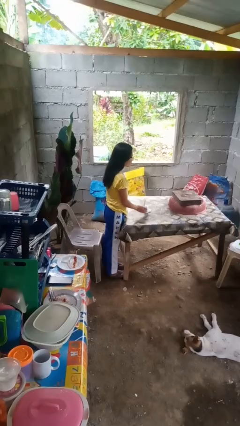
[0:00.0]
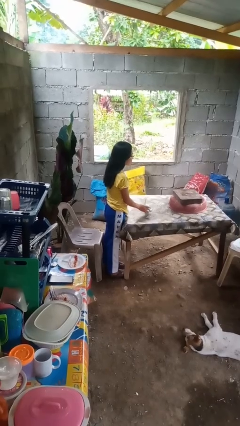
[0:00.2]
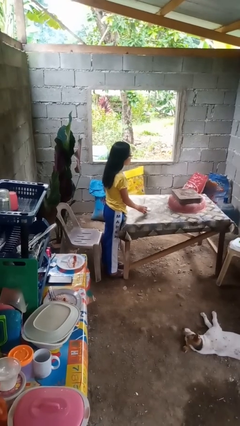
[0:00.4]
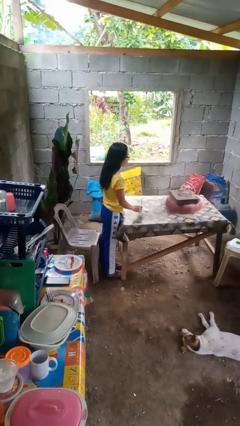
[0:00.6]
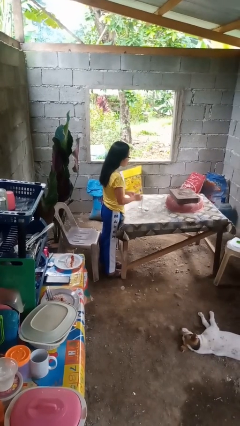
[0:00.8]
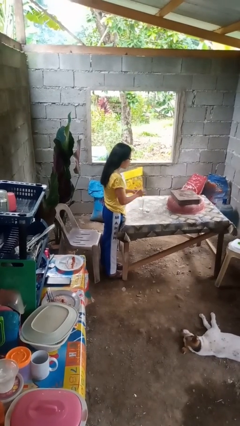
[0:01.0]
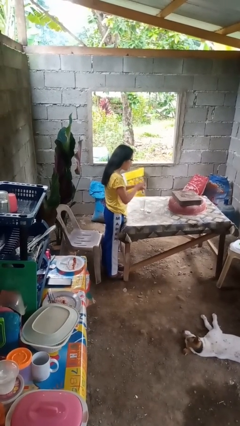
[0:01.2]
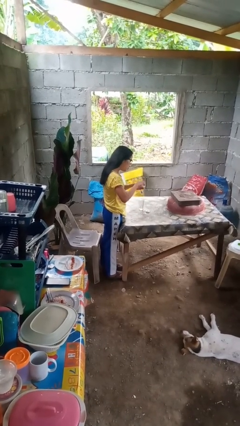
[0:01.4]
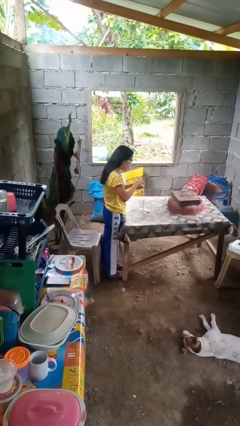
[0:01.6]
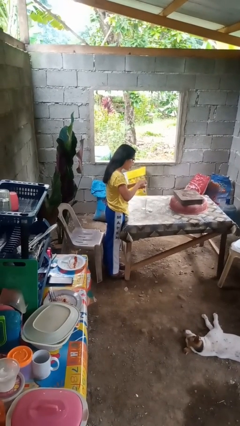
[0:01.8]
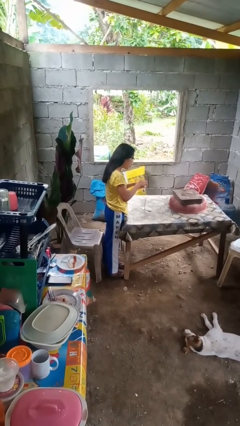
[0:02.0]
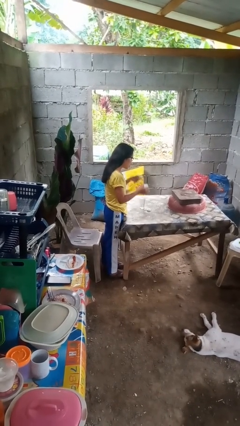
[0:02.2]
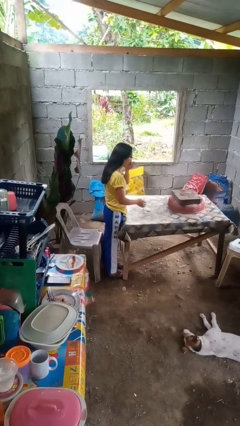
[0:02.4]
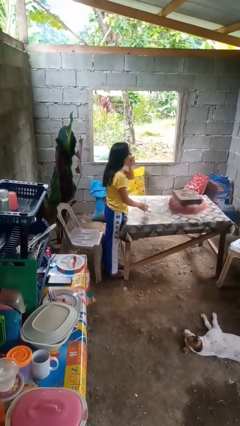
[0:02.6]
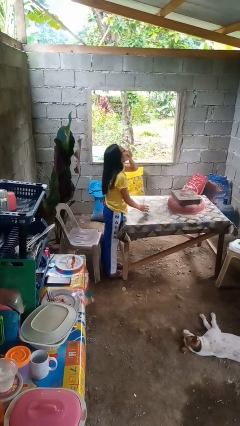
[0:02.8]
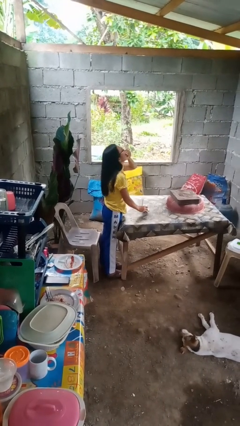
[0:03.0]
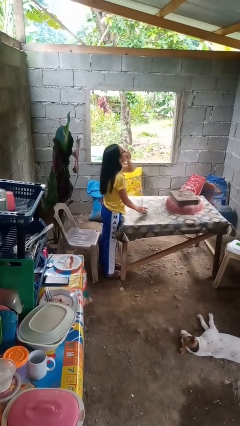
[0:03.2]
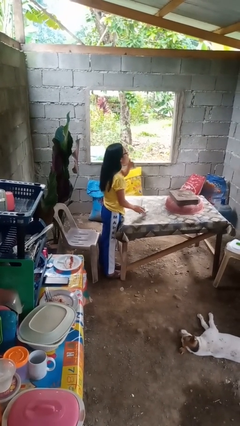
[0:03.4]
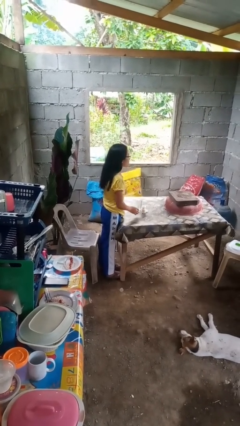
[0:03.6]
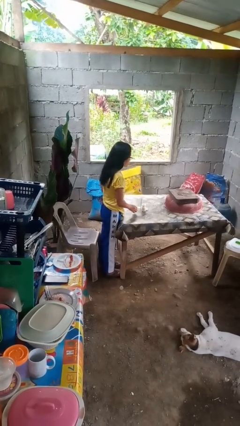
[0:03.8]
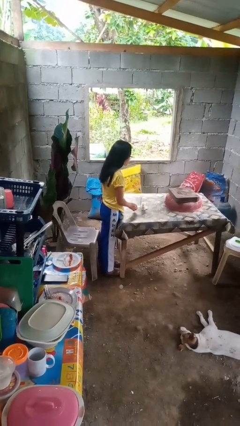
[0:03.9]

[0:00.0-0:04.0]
person takes medicine pills

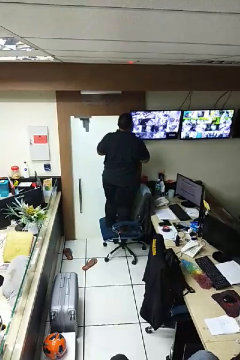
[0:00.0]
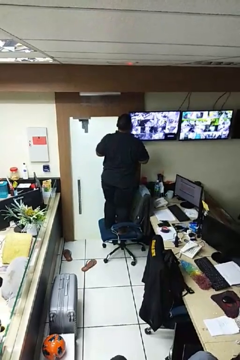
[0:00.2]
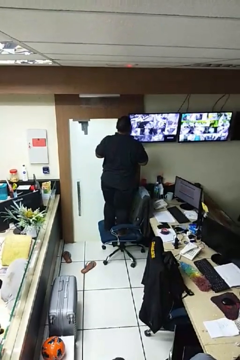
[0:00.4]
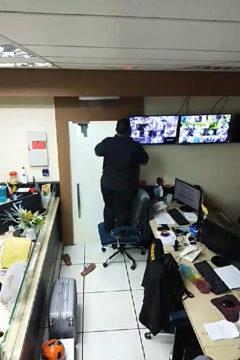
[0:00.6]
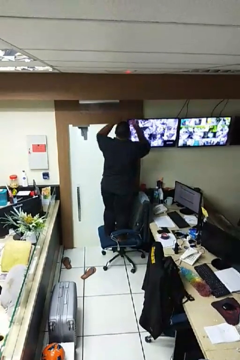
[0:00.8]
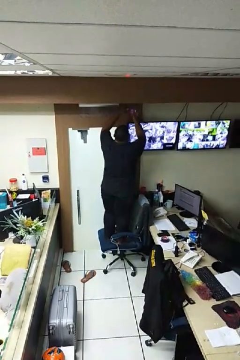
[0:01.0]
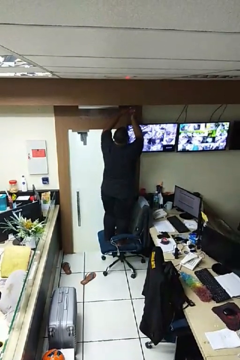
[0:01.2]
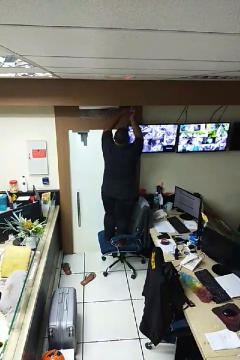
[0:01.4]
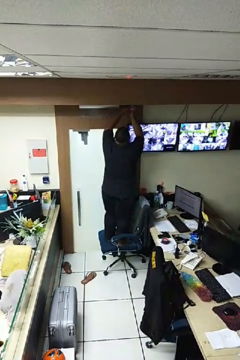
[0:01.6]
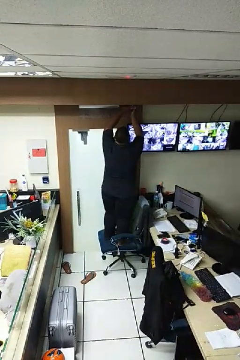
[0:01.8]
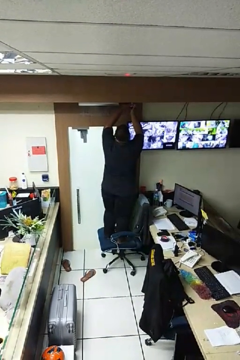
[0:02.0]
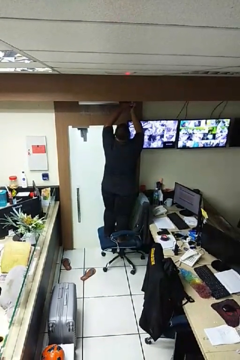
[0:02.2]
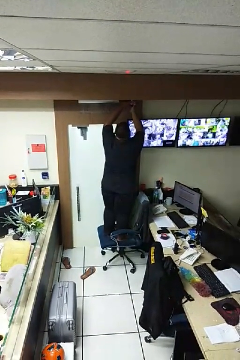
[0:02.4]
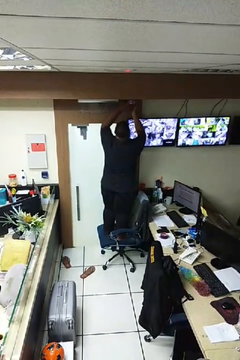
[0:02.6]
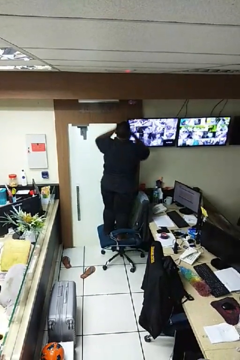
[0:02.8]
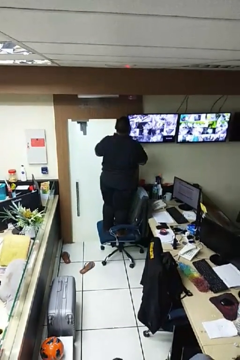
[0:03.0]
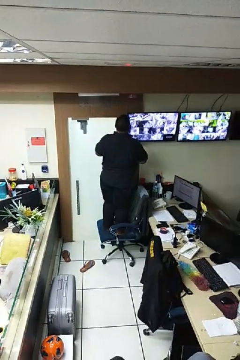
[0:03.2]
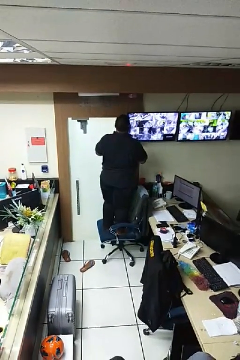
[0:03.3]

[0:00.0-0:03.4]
person puts up smoke detector

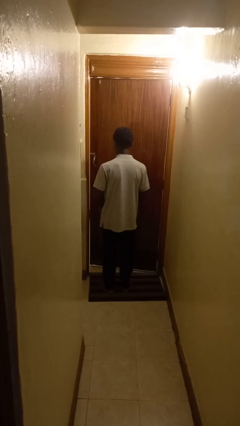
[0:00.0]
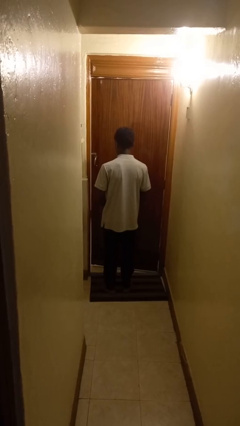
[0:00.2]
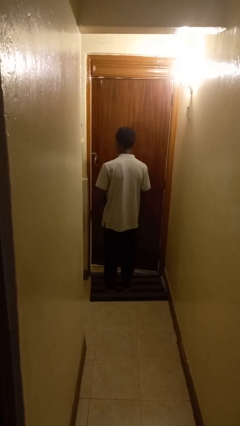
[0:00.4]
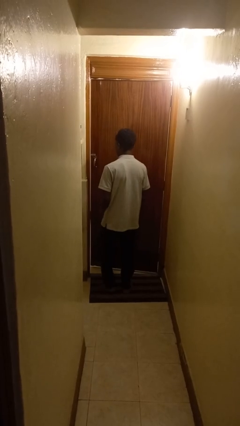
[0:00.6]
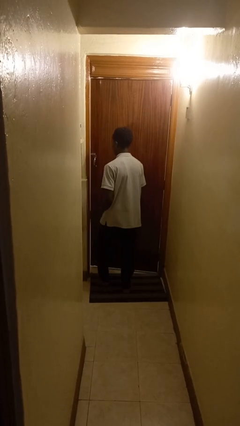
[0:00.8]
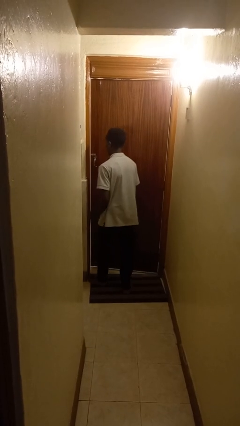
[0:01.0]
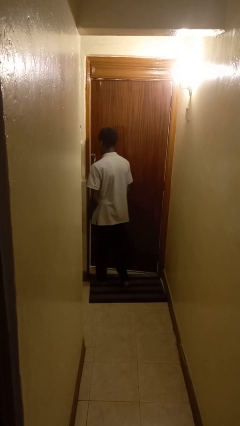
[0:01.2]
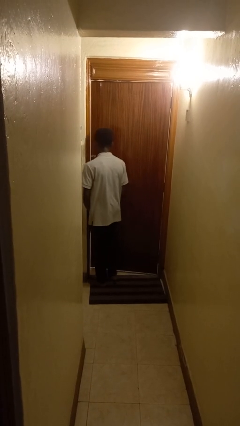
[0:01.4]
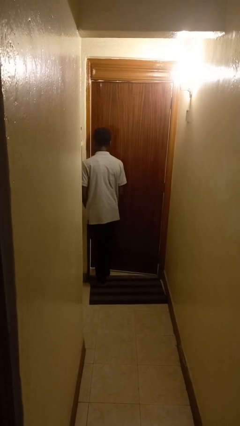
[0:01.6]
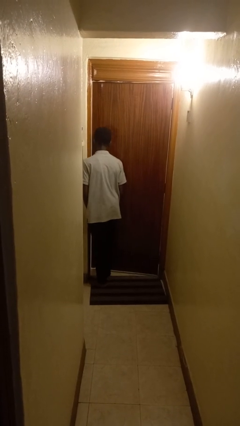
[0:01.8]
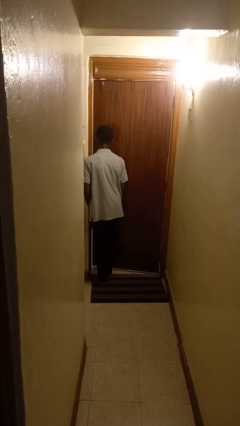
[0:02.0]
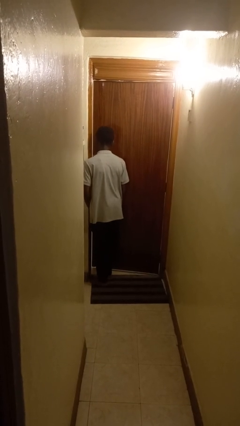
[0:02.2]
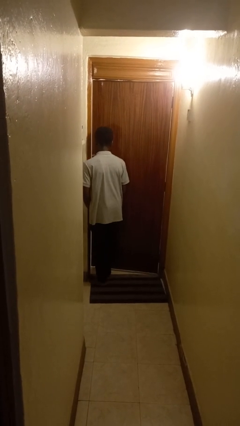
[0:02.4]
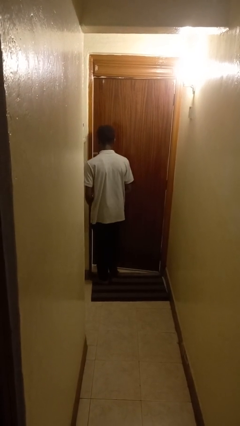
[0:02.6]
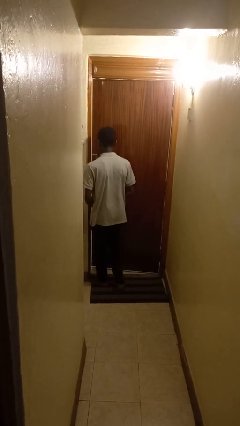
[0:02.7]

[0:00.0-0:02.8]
person bumps into wall

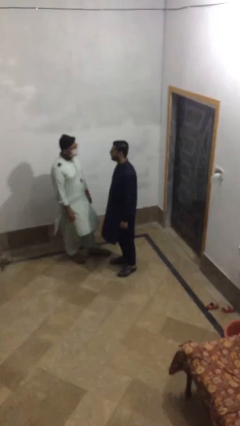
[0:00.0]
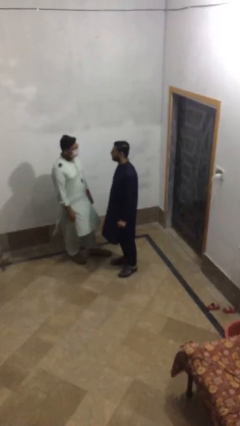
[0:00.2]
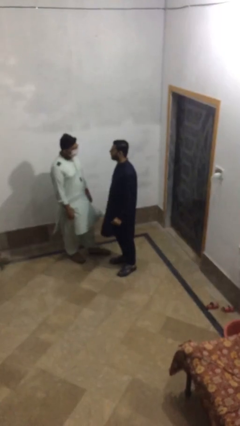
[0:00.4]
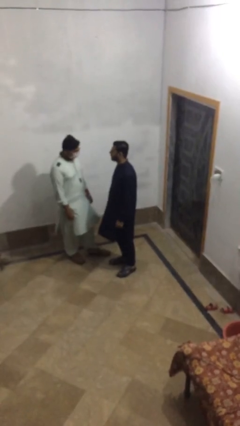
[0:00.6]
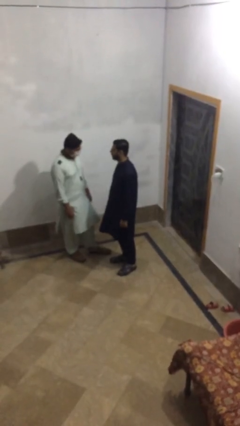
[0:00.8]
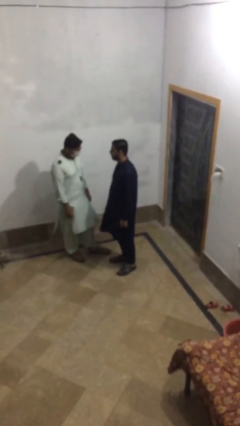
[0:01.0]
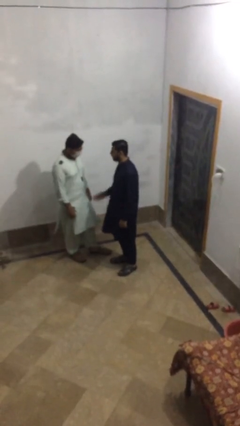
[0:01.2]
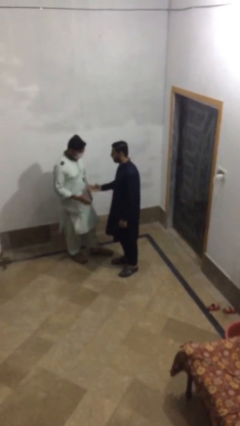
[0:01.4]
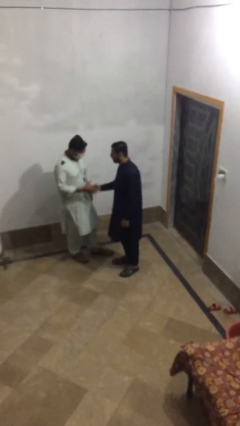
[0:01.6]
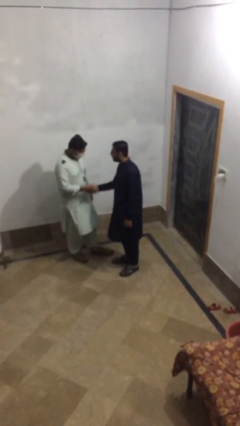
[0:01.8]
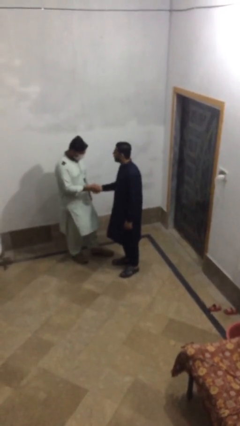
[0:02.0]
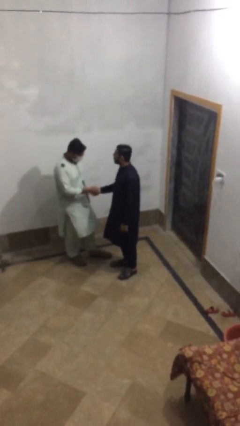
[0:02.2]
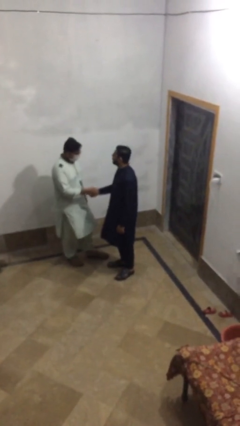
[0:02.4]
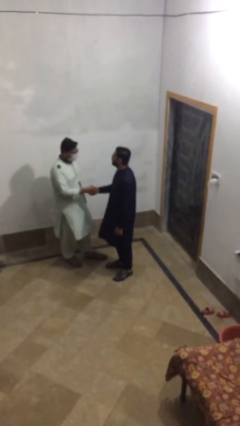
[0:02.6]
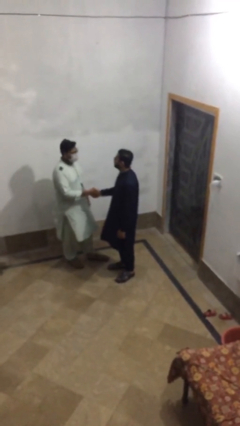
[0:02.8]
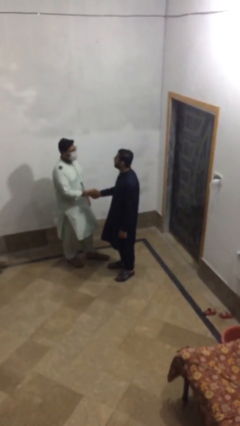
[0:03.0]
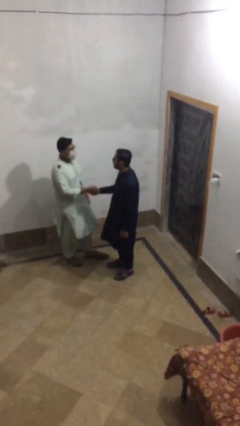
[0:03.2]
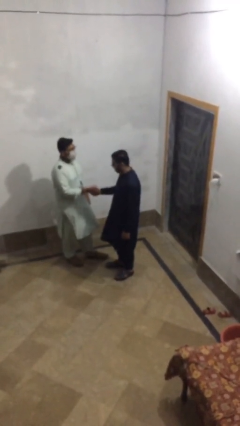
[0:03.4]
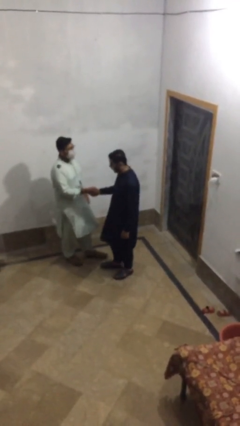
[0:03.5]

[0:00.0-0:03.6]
person shakes hand

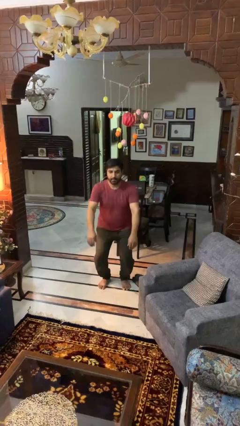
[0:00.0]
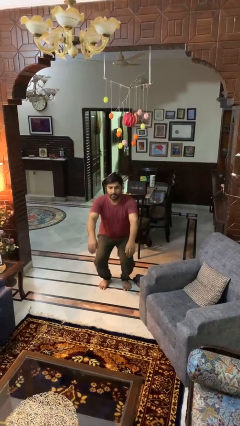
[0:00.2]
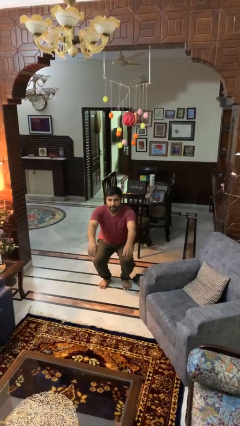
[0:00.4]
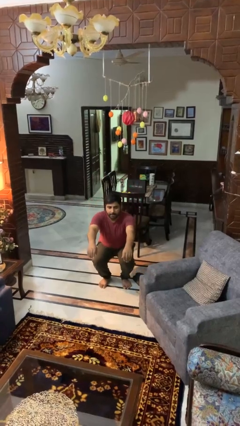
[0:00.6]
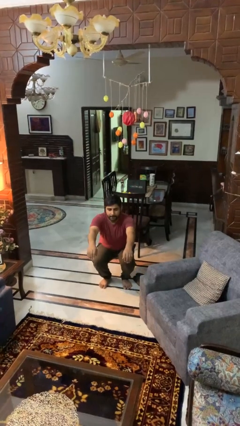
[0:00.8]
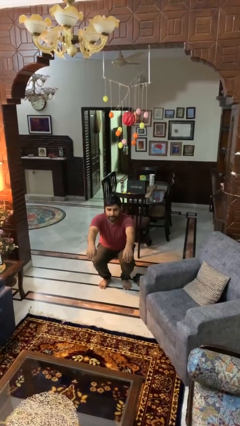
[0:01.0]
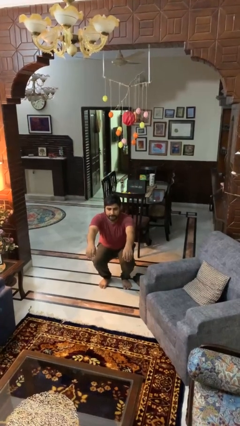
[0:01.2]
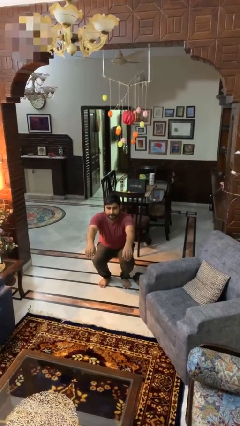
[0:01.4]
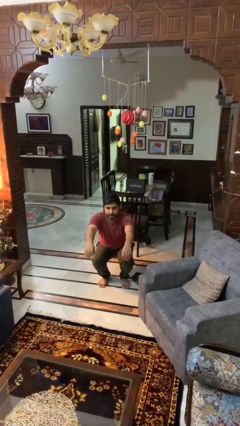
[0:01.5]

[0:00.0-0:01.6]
person squats

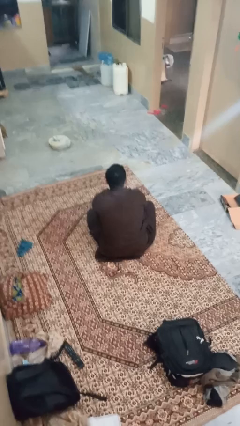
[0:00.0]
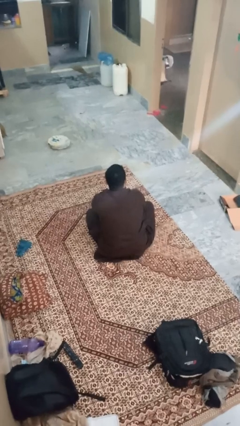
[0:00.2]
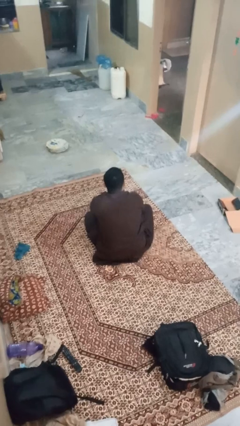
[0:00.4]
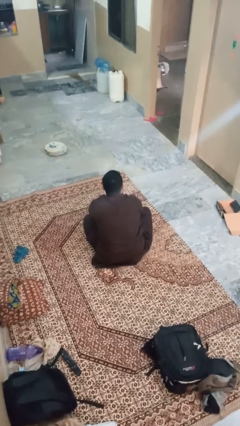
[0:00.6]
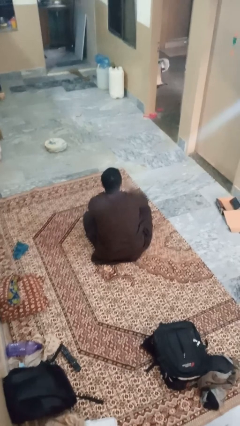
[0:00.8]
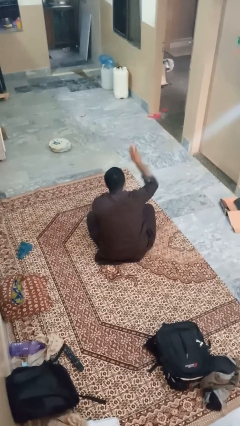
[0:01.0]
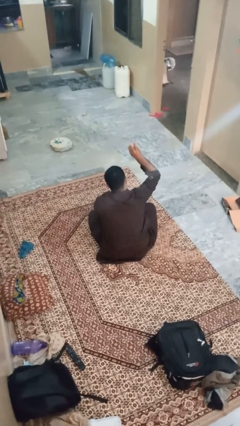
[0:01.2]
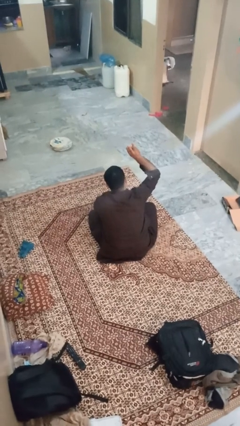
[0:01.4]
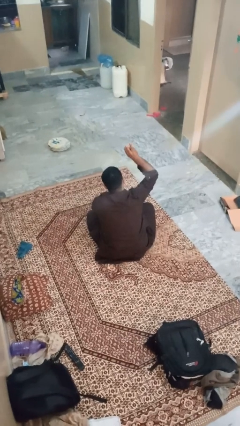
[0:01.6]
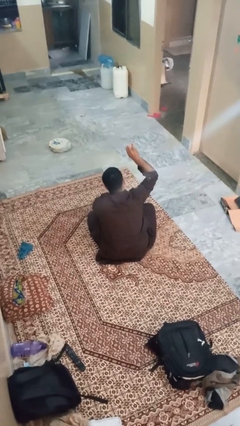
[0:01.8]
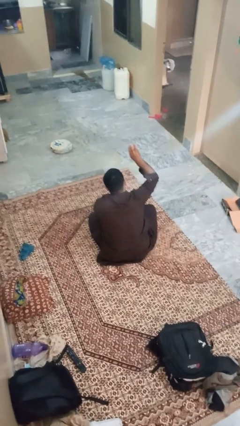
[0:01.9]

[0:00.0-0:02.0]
person gestures number three

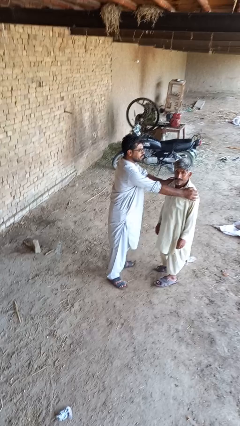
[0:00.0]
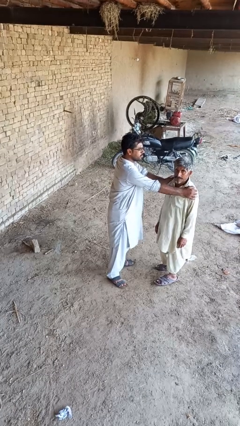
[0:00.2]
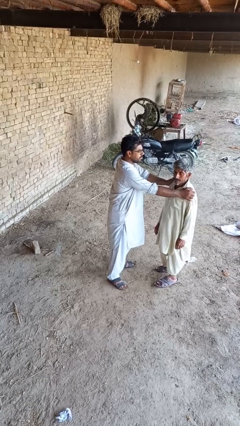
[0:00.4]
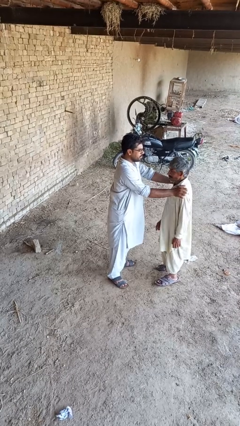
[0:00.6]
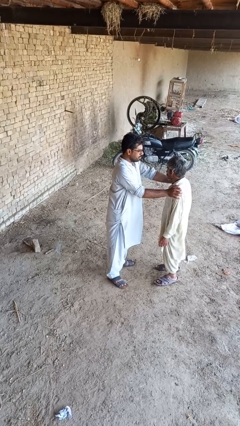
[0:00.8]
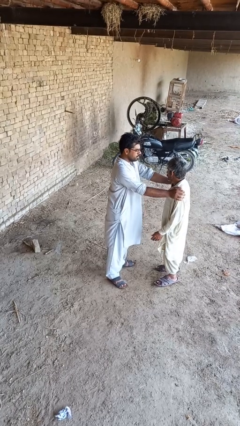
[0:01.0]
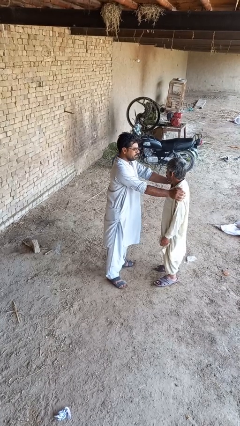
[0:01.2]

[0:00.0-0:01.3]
person spins person around
